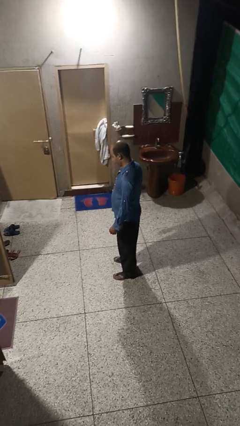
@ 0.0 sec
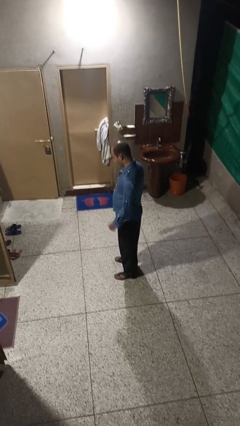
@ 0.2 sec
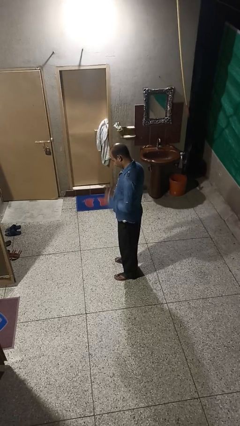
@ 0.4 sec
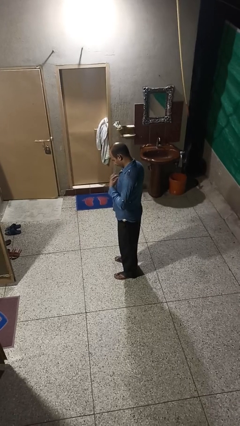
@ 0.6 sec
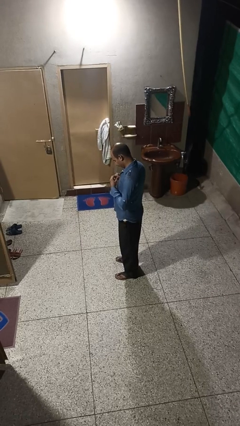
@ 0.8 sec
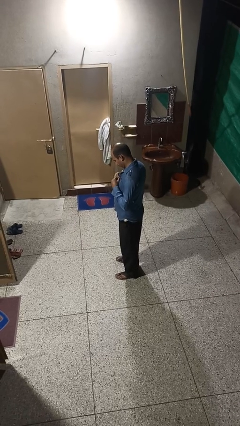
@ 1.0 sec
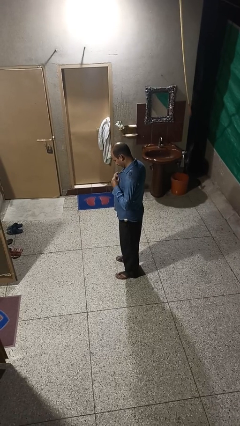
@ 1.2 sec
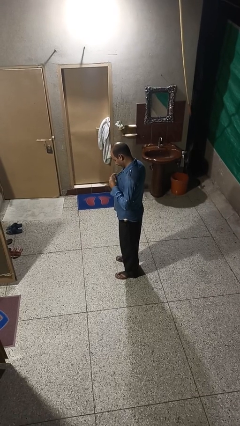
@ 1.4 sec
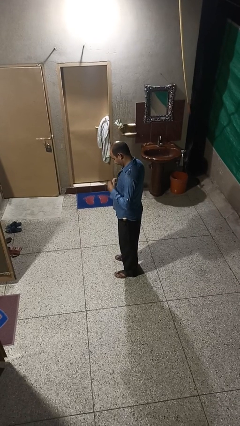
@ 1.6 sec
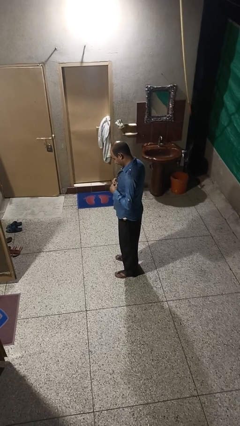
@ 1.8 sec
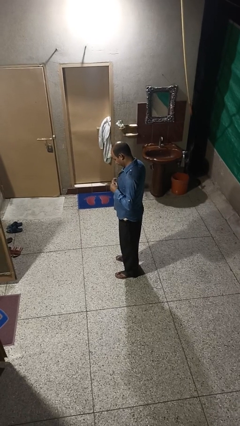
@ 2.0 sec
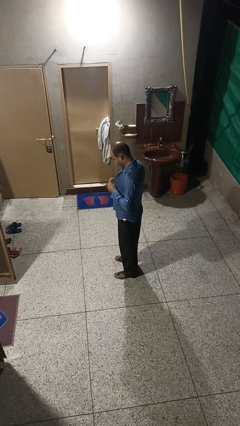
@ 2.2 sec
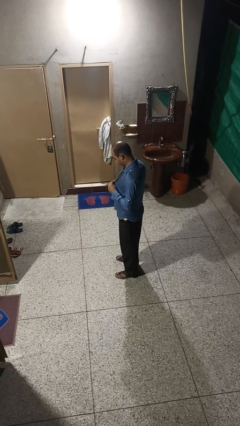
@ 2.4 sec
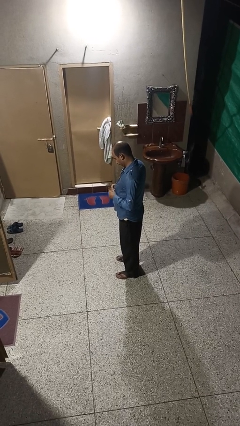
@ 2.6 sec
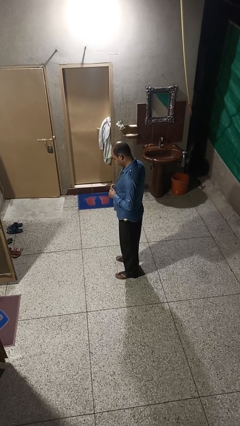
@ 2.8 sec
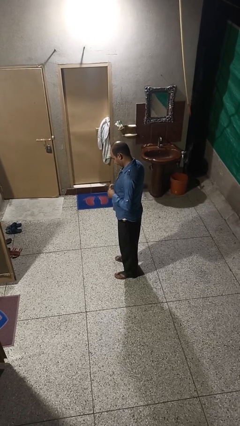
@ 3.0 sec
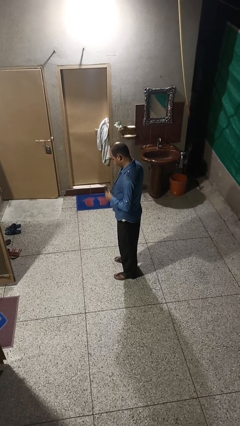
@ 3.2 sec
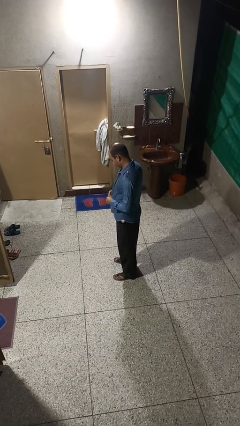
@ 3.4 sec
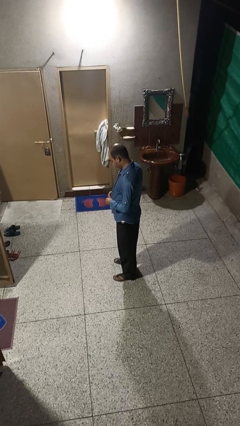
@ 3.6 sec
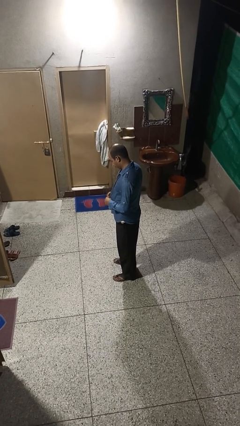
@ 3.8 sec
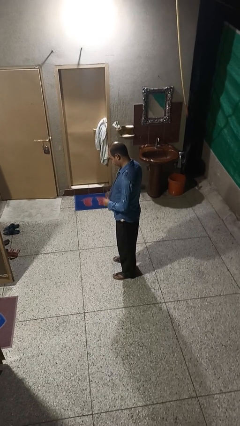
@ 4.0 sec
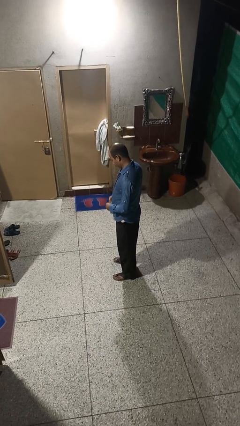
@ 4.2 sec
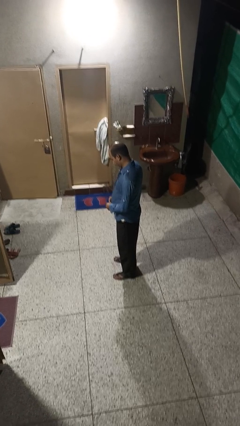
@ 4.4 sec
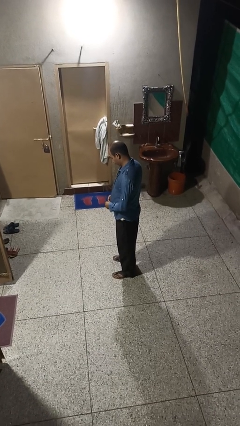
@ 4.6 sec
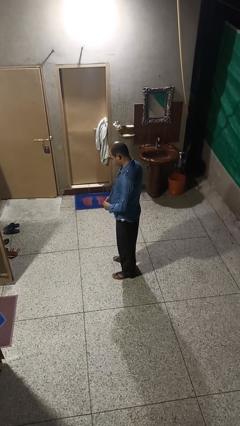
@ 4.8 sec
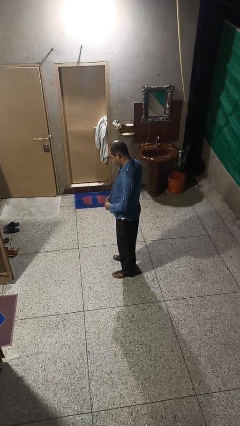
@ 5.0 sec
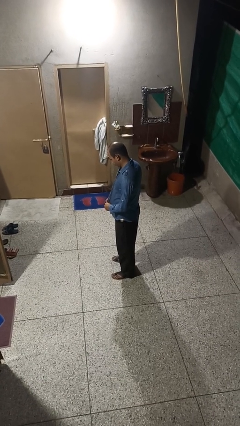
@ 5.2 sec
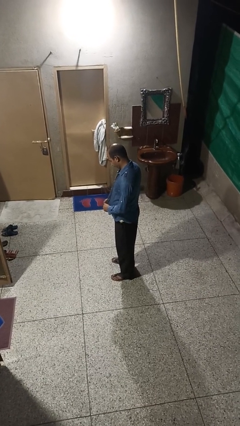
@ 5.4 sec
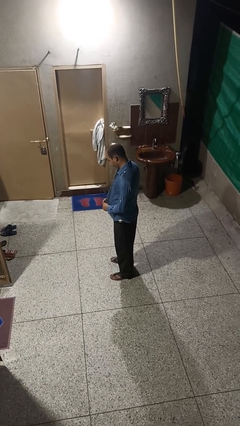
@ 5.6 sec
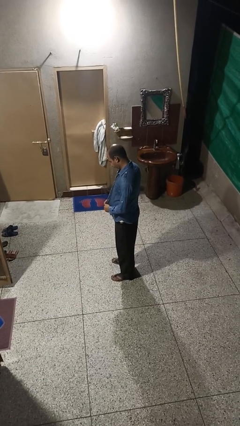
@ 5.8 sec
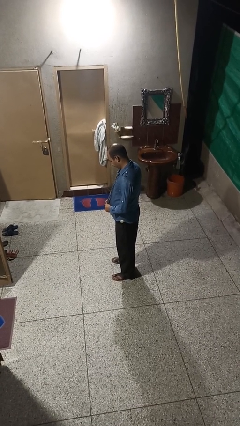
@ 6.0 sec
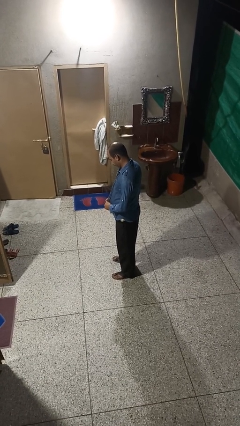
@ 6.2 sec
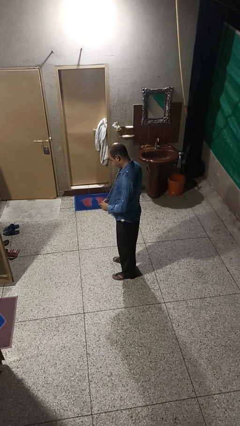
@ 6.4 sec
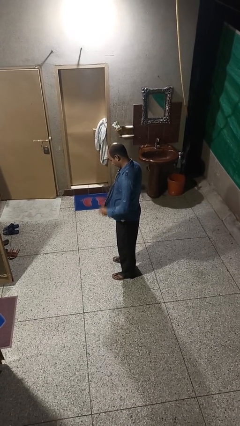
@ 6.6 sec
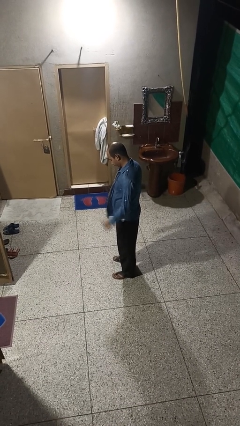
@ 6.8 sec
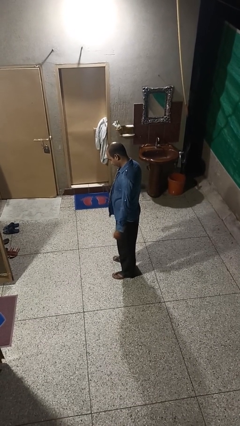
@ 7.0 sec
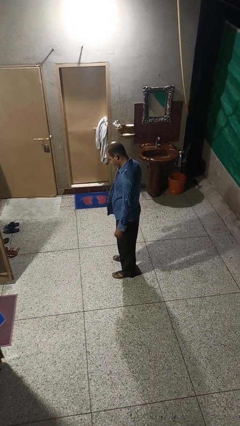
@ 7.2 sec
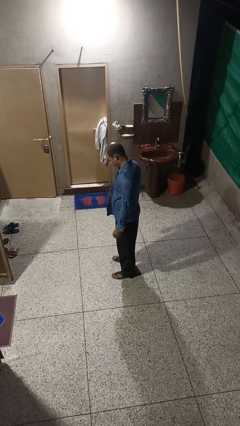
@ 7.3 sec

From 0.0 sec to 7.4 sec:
person unbuttons shirt

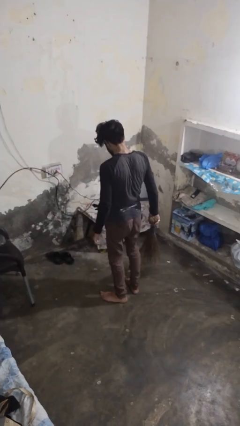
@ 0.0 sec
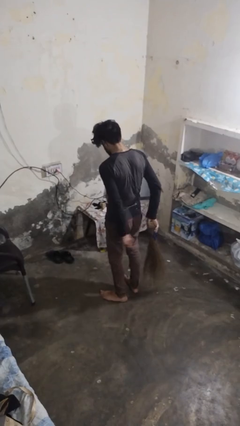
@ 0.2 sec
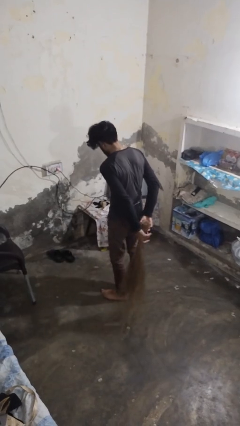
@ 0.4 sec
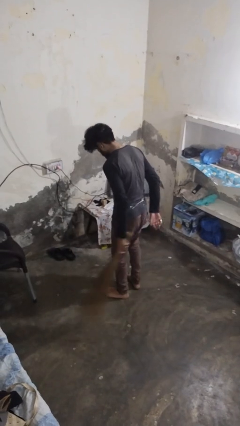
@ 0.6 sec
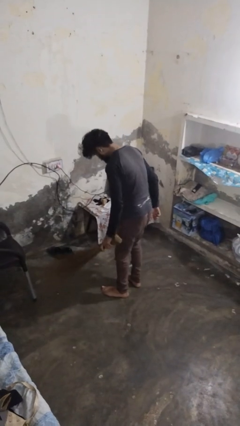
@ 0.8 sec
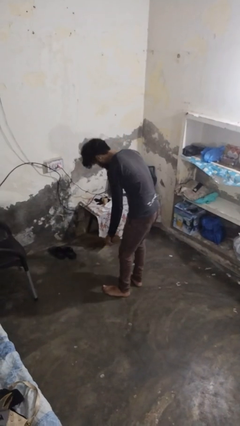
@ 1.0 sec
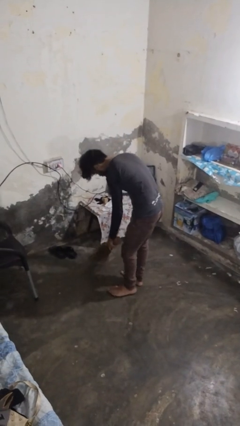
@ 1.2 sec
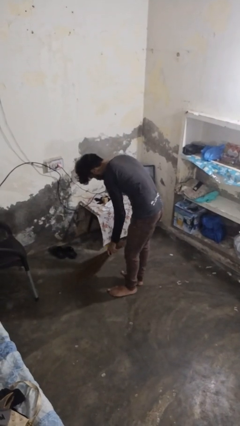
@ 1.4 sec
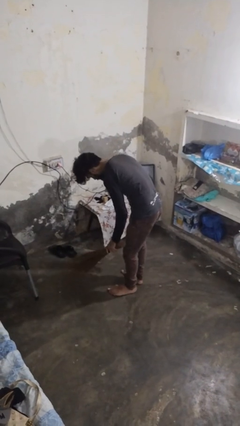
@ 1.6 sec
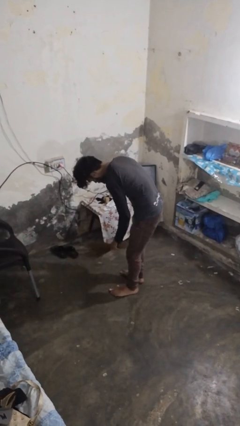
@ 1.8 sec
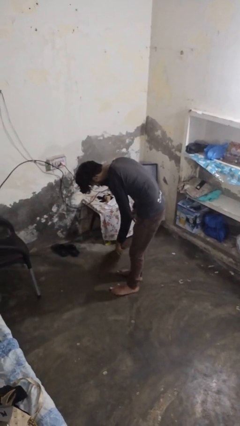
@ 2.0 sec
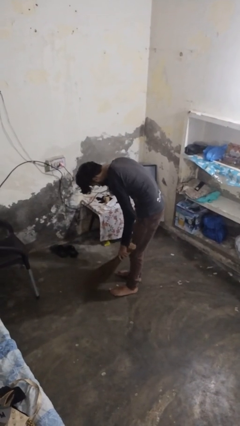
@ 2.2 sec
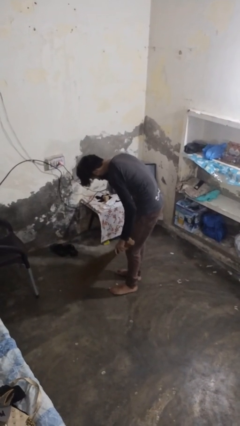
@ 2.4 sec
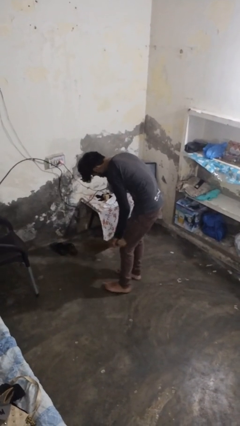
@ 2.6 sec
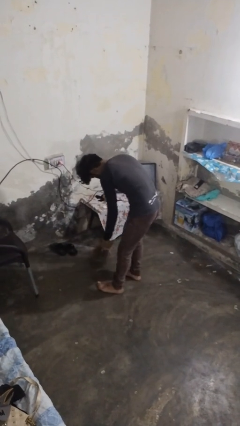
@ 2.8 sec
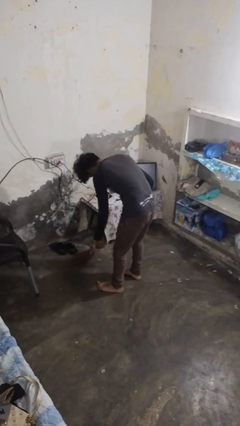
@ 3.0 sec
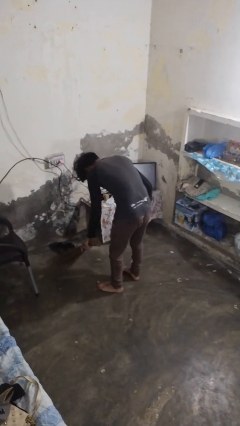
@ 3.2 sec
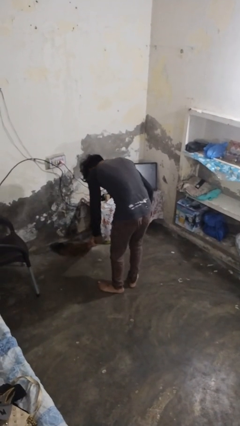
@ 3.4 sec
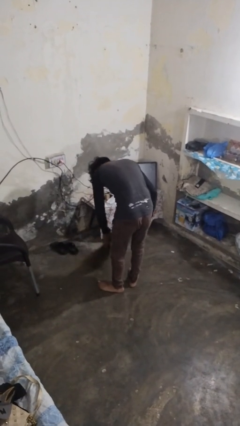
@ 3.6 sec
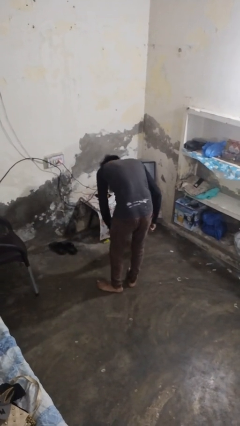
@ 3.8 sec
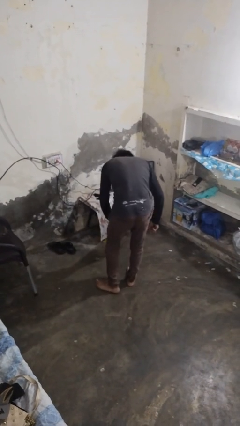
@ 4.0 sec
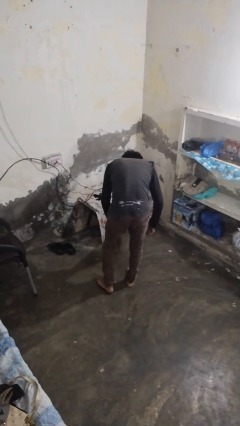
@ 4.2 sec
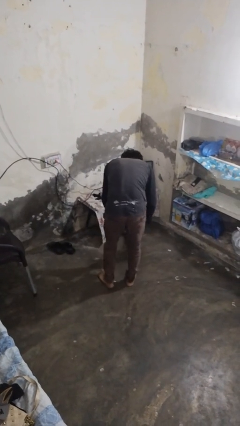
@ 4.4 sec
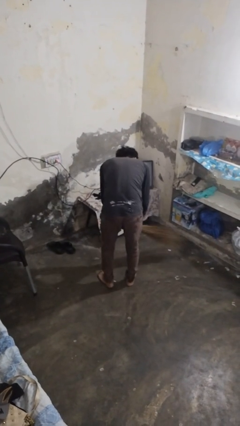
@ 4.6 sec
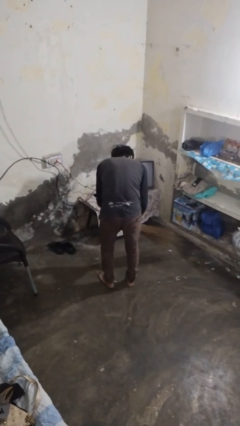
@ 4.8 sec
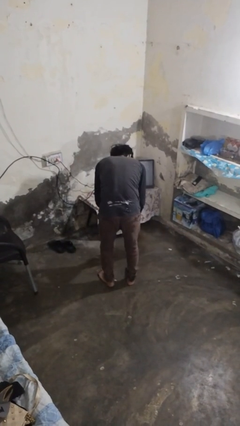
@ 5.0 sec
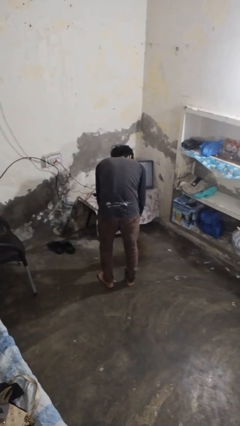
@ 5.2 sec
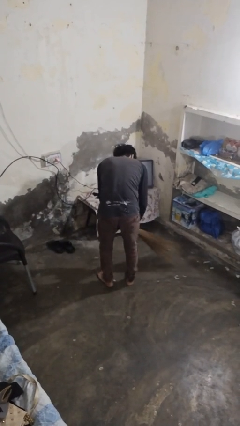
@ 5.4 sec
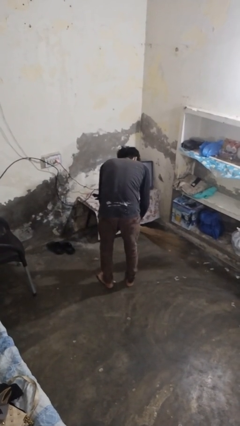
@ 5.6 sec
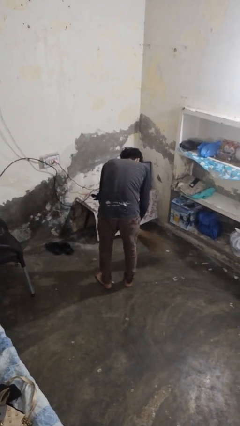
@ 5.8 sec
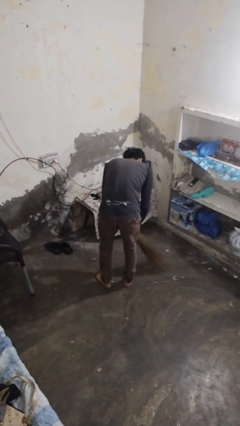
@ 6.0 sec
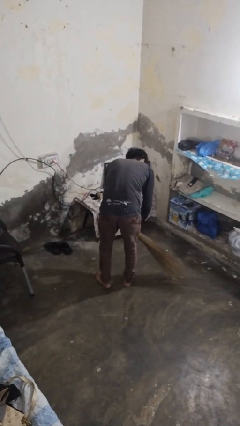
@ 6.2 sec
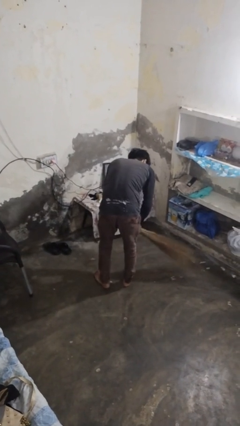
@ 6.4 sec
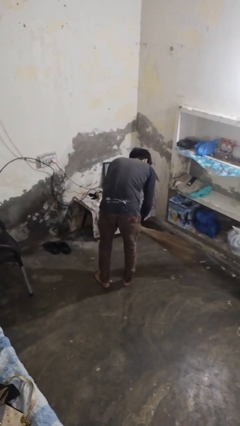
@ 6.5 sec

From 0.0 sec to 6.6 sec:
person sweeps floor

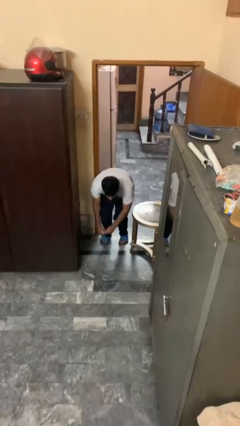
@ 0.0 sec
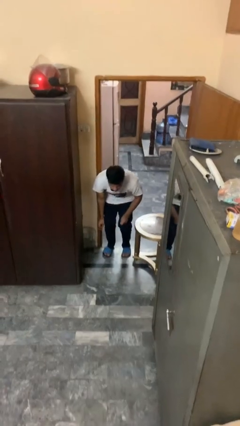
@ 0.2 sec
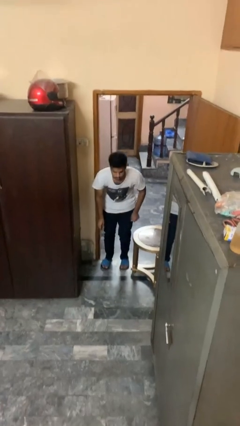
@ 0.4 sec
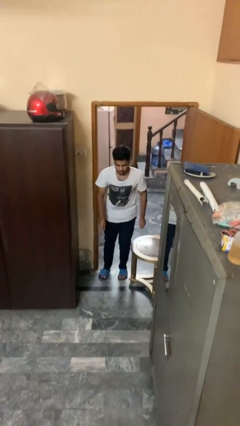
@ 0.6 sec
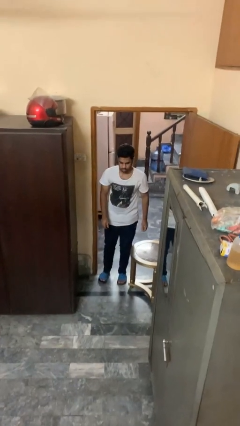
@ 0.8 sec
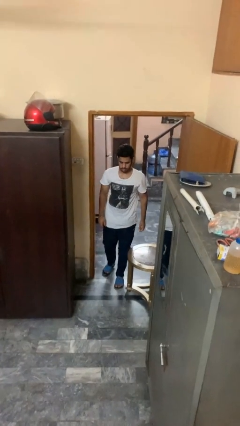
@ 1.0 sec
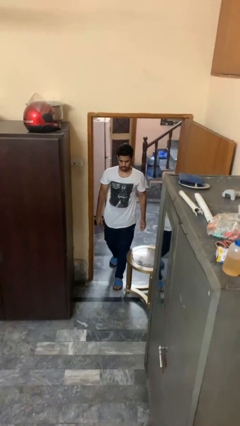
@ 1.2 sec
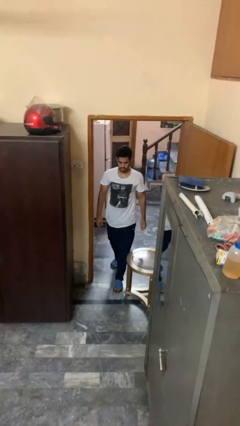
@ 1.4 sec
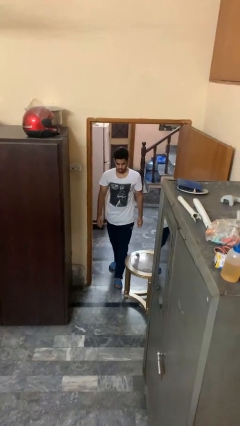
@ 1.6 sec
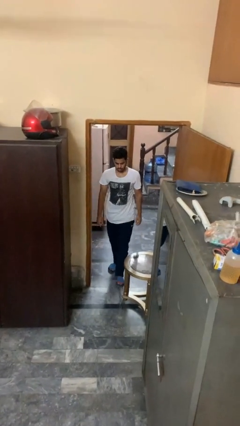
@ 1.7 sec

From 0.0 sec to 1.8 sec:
person stands up from floor

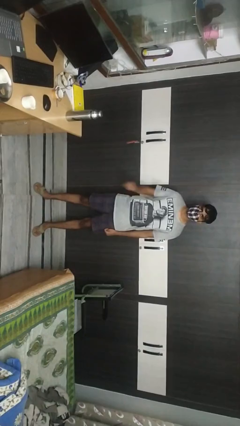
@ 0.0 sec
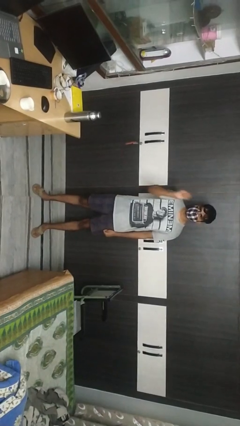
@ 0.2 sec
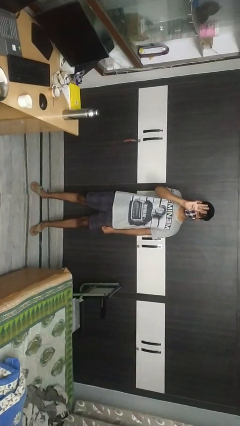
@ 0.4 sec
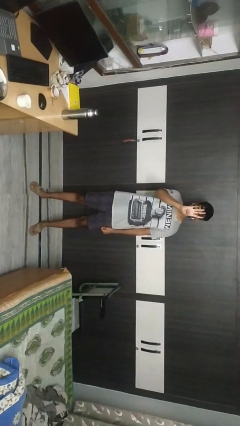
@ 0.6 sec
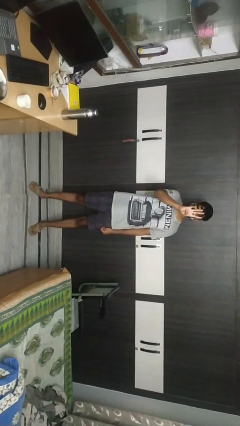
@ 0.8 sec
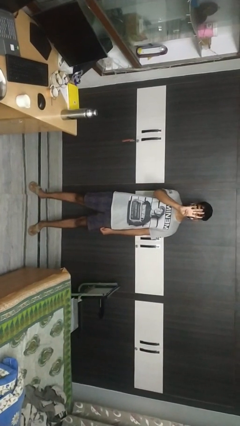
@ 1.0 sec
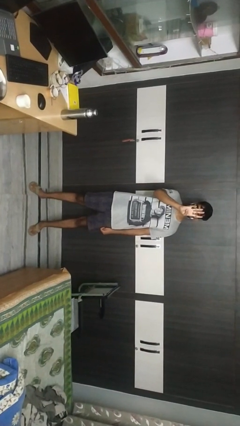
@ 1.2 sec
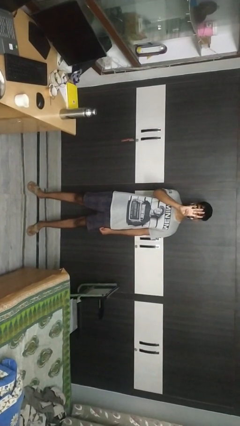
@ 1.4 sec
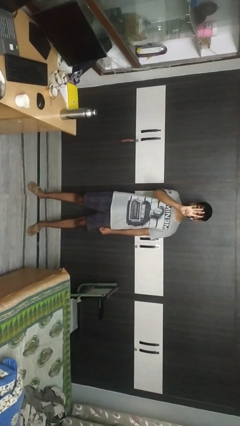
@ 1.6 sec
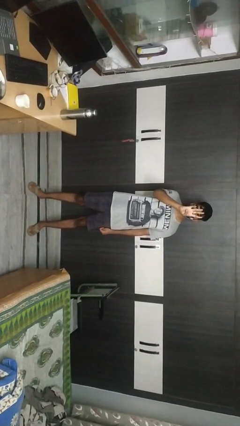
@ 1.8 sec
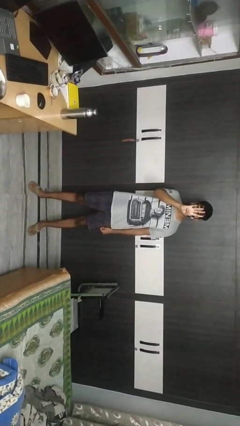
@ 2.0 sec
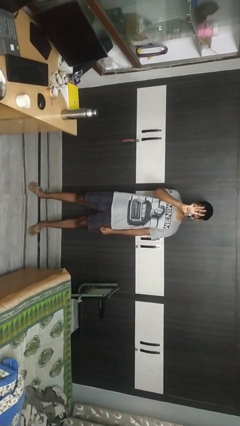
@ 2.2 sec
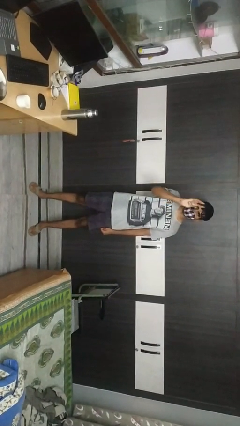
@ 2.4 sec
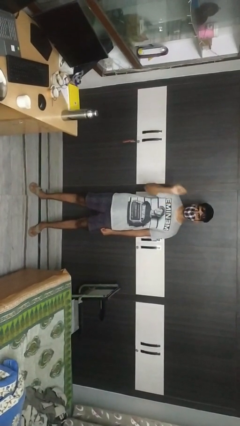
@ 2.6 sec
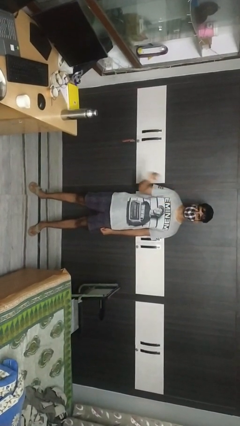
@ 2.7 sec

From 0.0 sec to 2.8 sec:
person gestures number four
